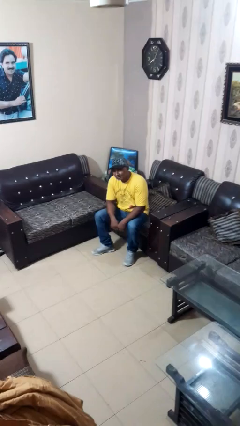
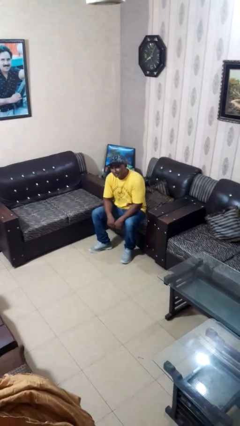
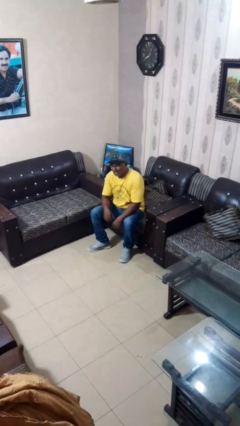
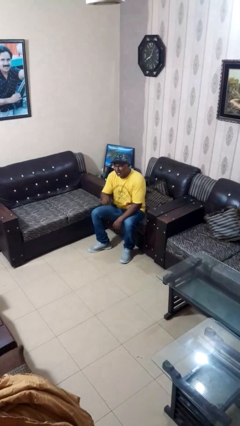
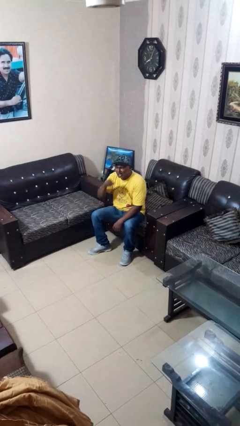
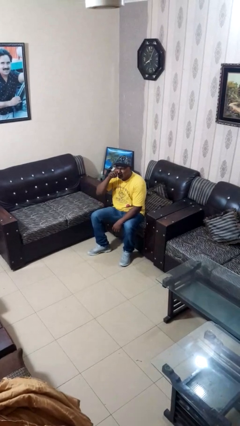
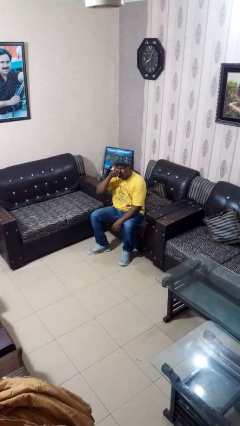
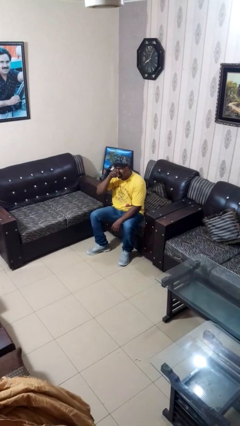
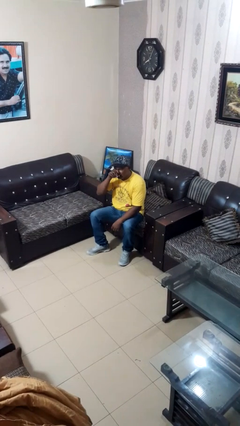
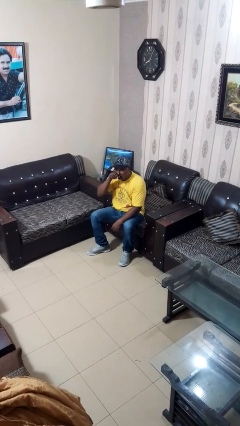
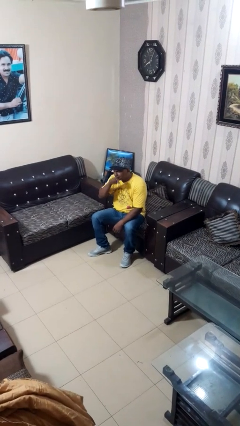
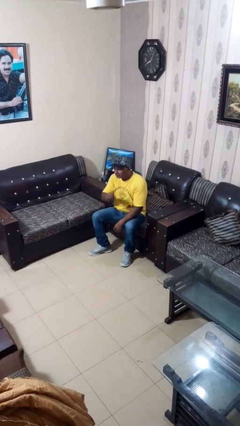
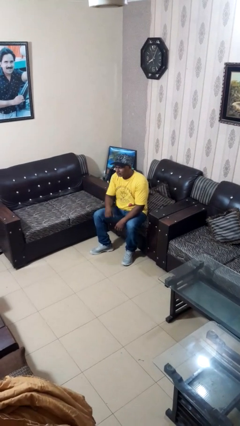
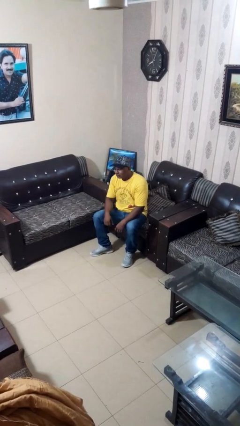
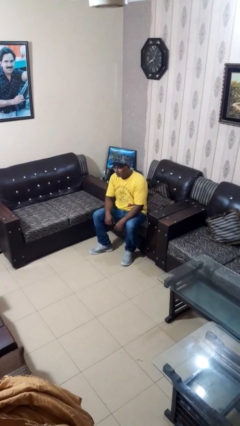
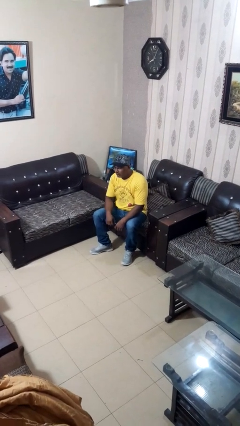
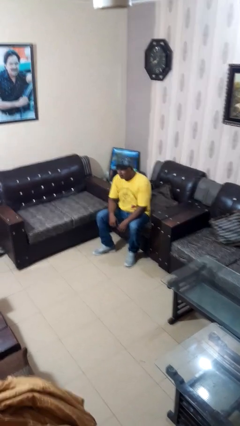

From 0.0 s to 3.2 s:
person yawns

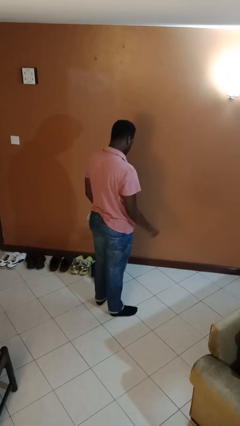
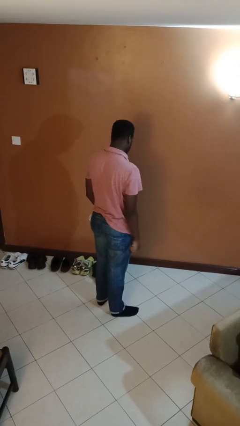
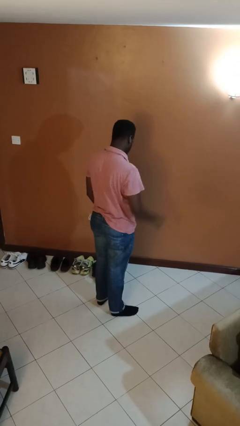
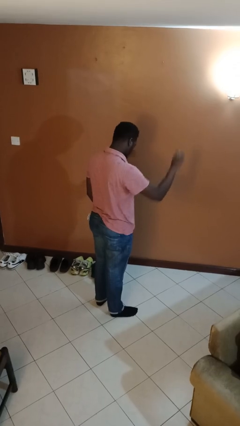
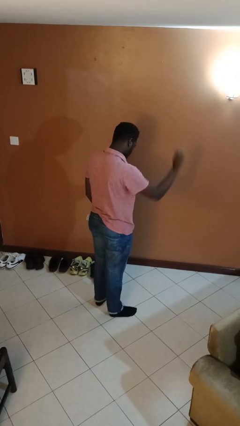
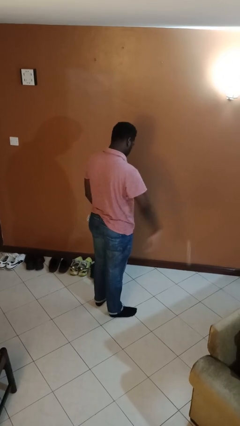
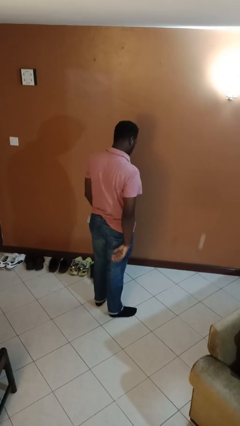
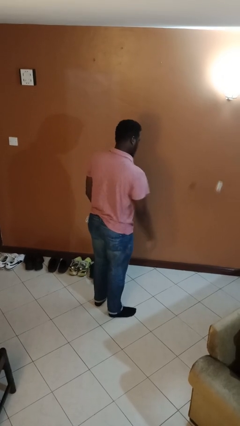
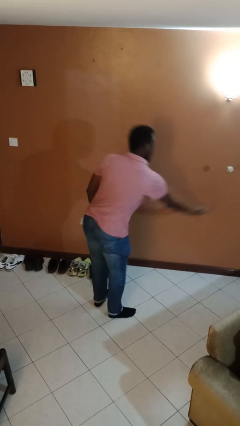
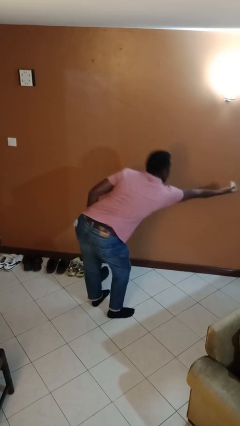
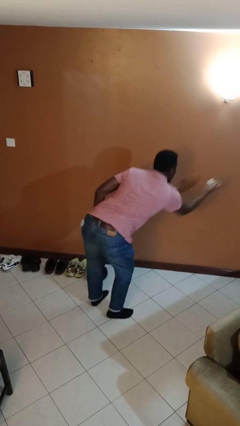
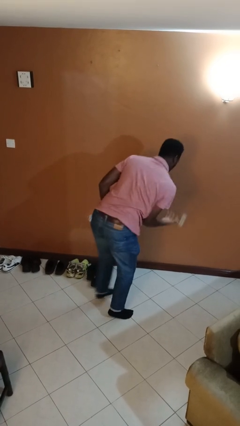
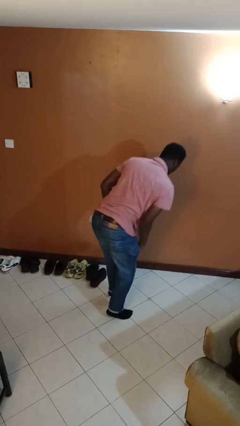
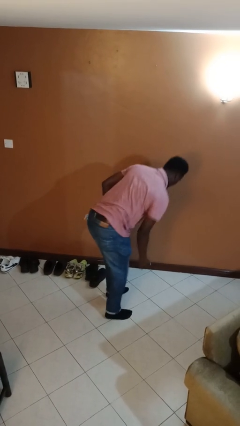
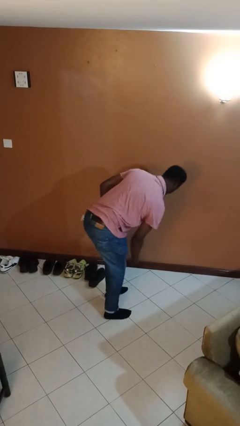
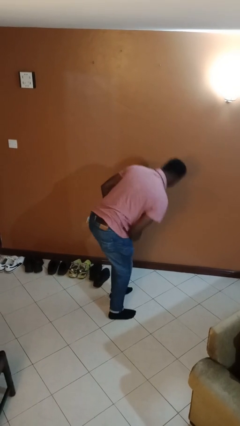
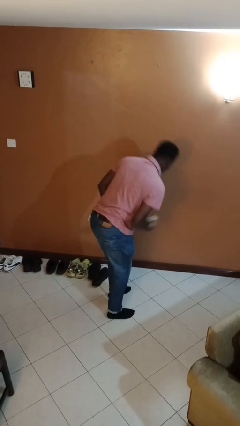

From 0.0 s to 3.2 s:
person bounces ball on floor

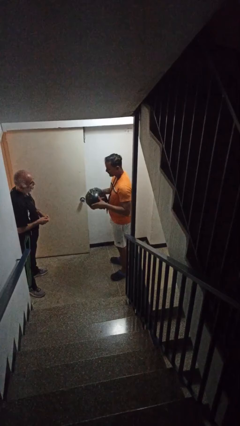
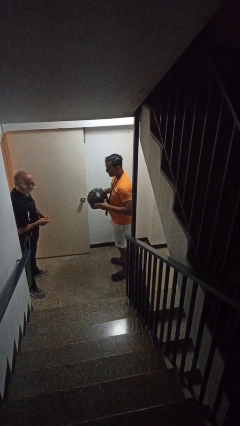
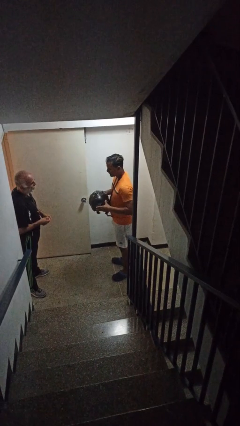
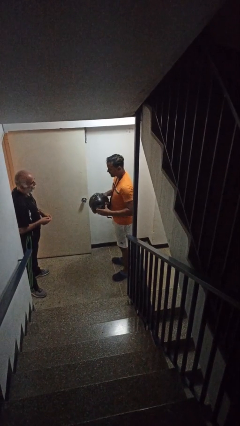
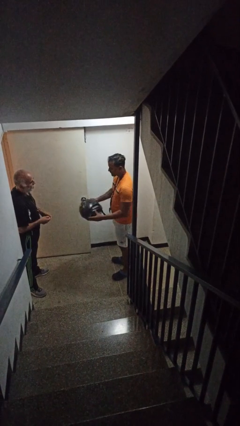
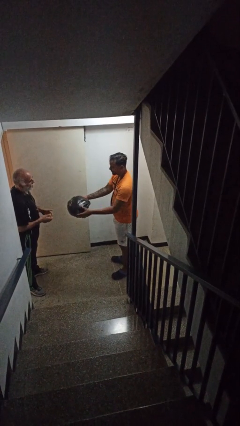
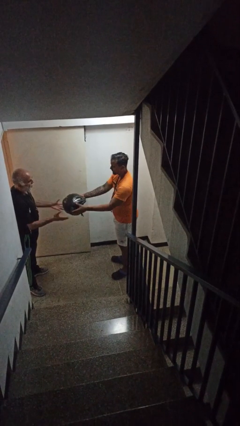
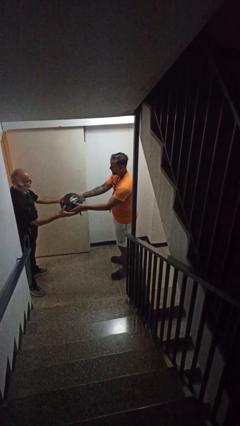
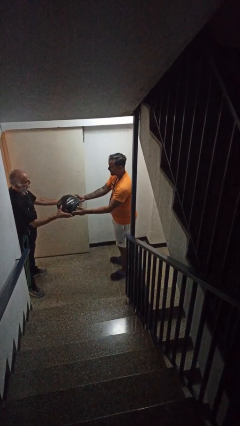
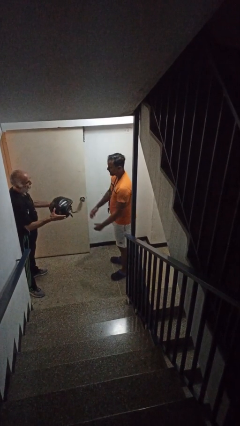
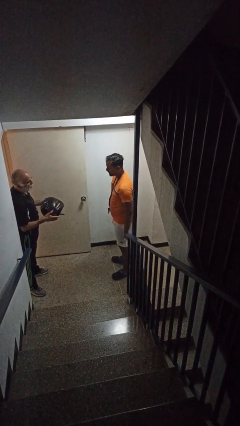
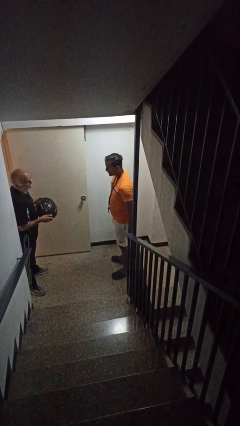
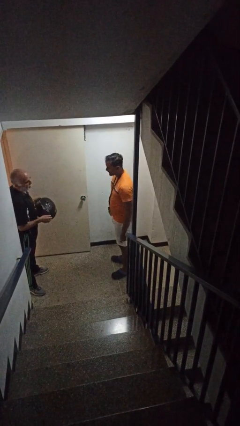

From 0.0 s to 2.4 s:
person transfers object to person

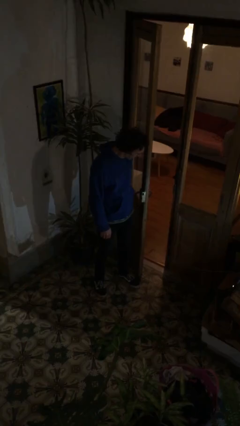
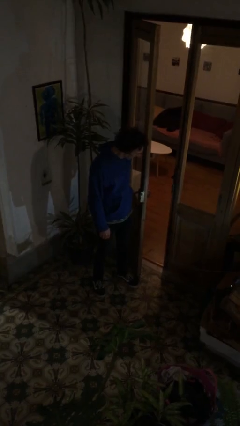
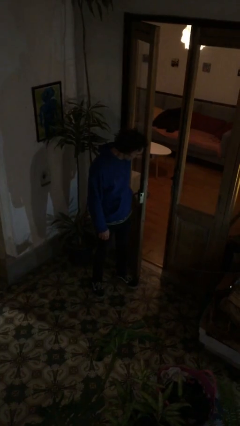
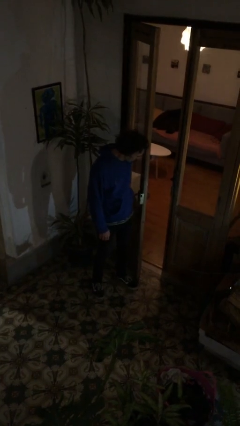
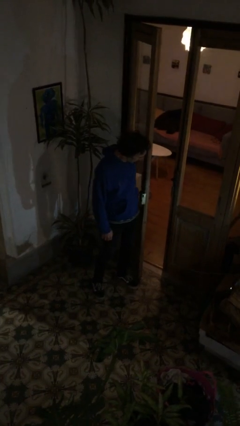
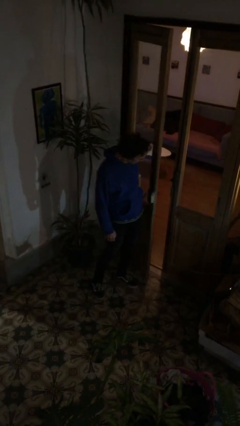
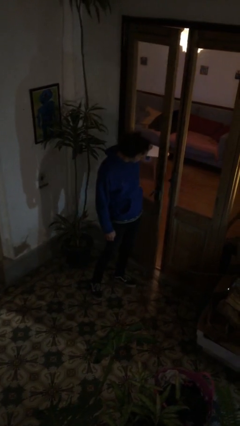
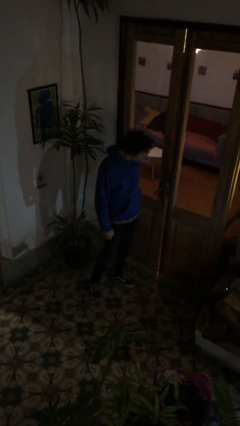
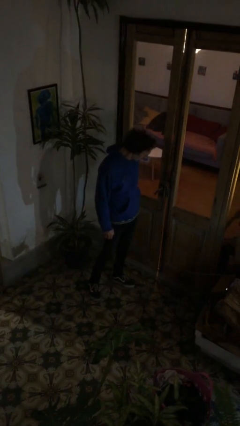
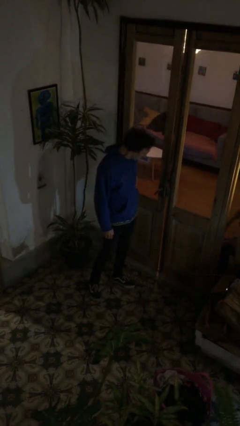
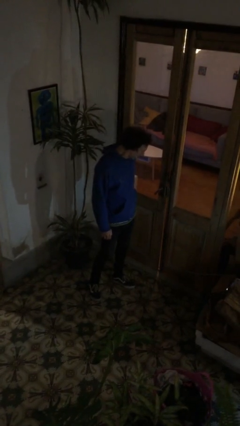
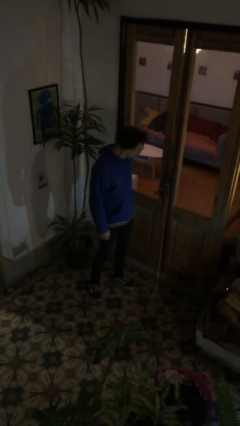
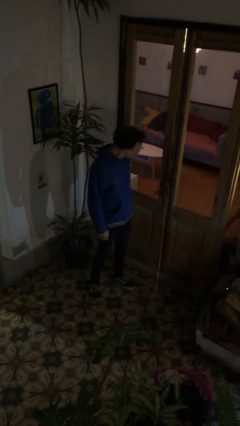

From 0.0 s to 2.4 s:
person closes door with hip

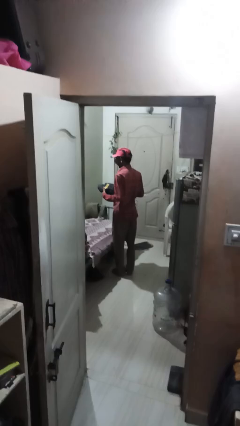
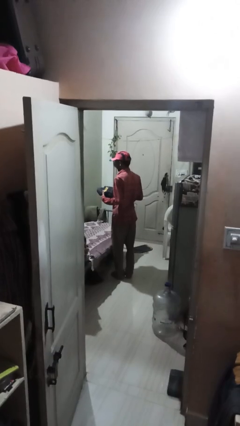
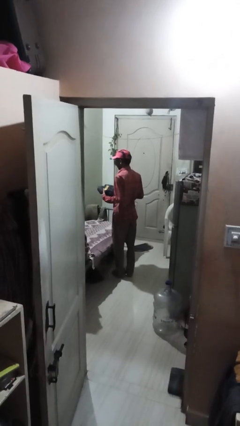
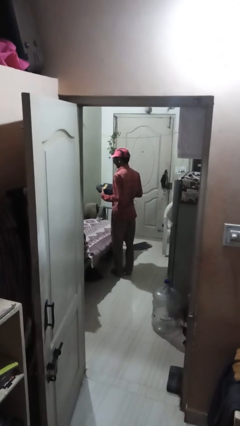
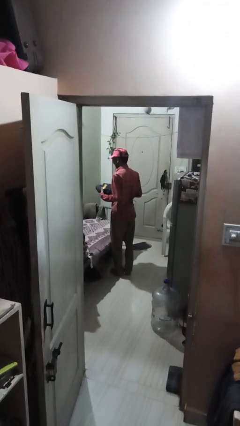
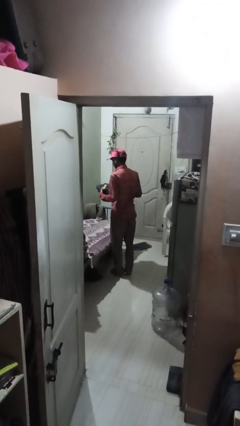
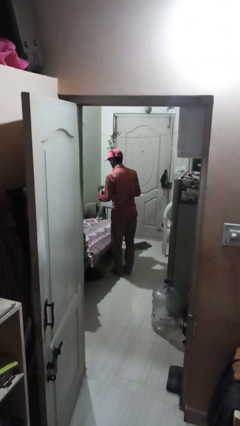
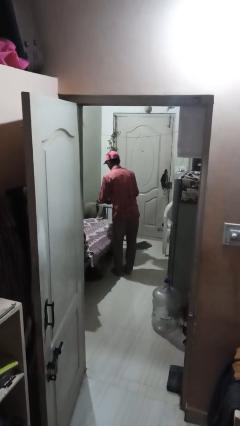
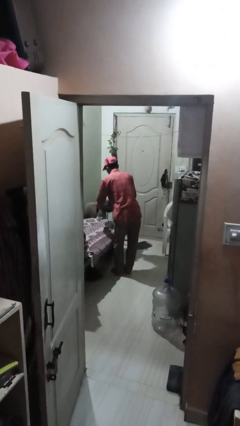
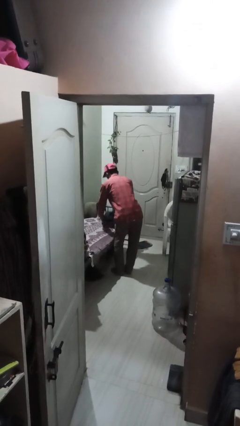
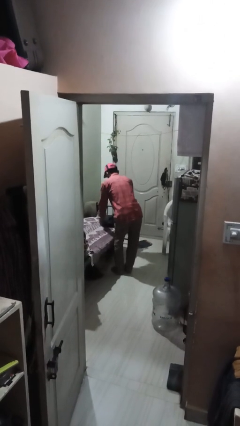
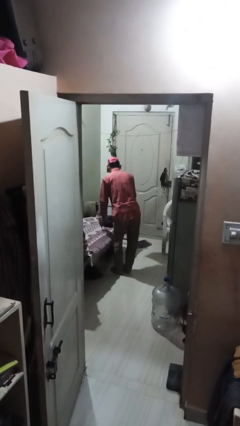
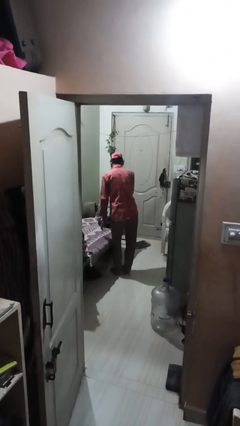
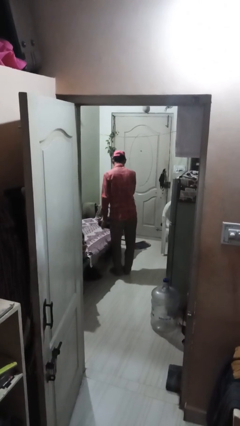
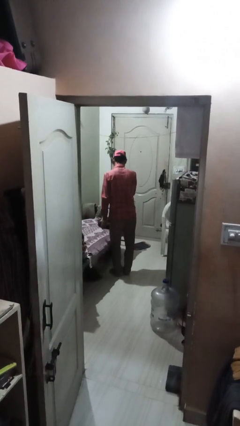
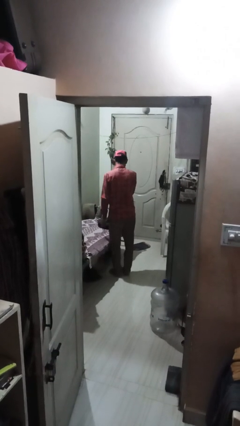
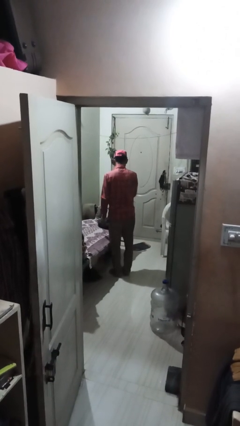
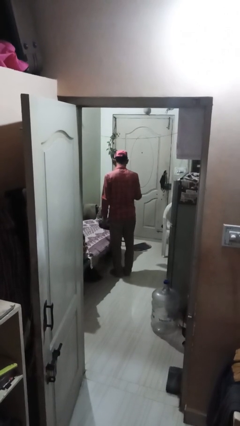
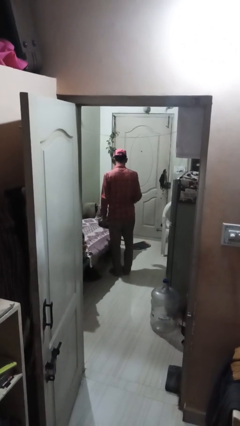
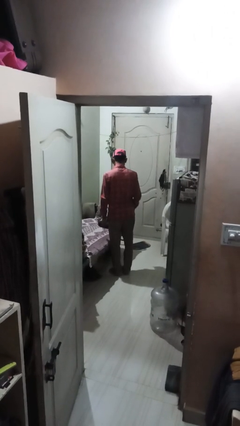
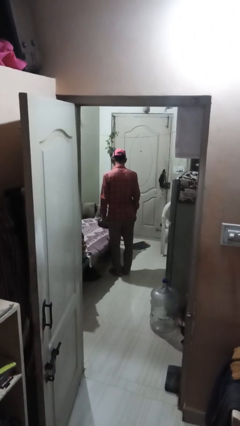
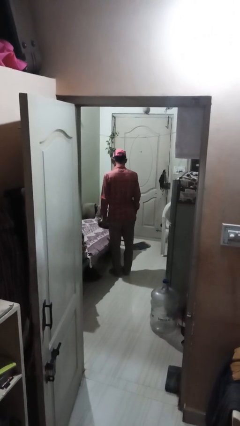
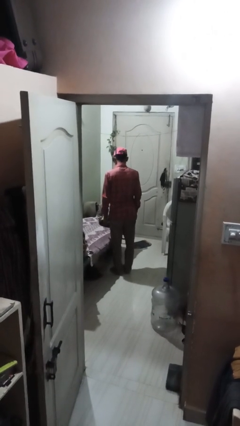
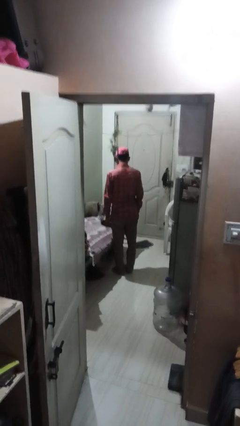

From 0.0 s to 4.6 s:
person puts down object on bed

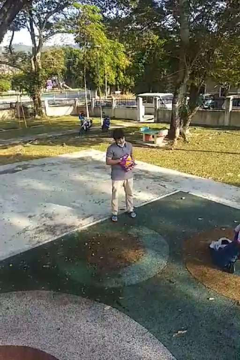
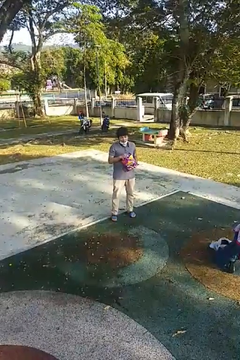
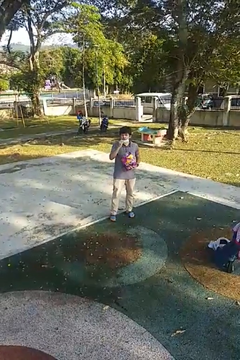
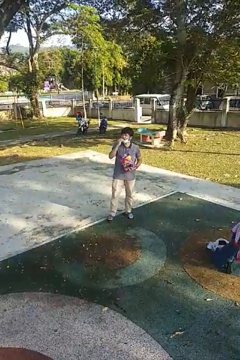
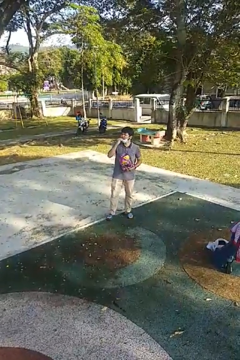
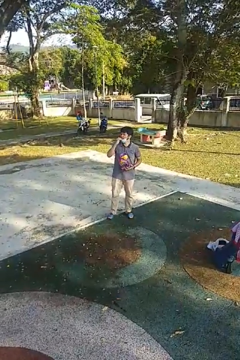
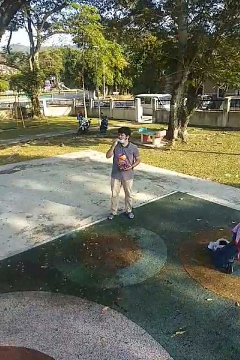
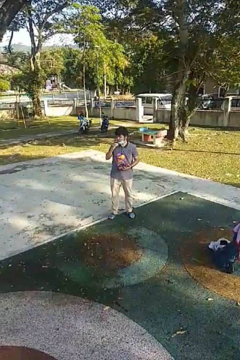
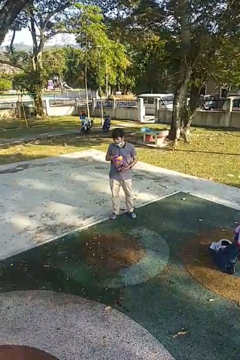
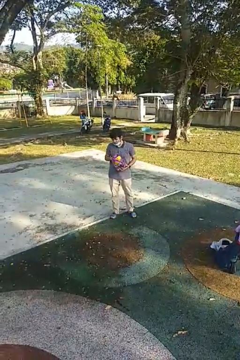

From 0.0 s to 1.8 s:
person eats snack from bag

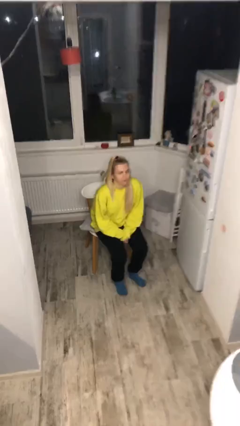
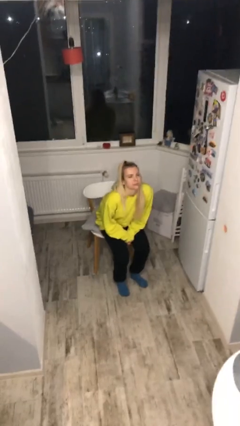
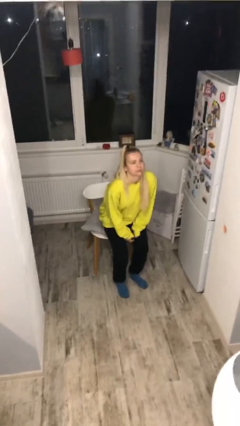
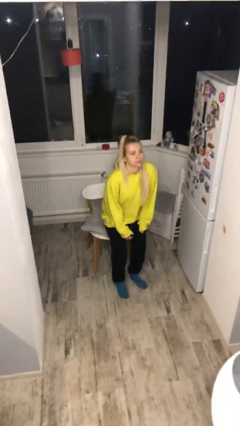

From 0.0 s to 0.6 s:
person stands up
